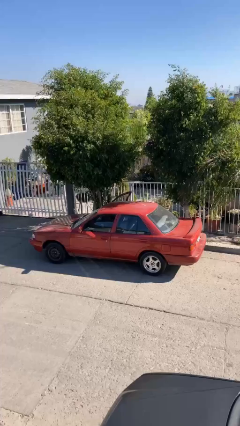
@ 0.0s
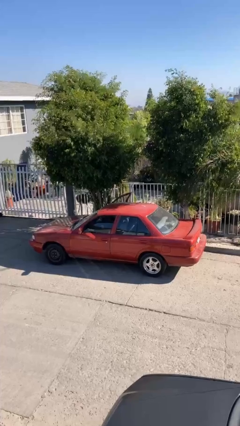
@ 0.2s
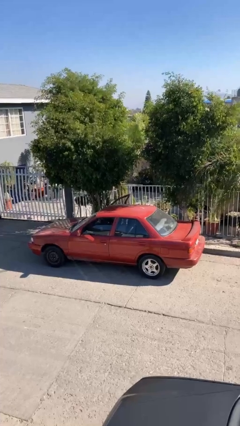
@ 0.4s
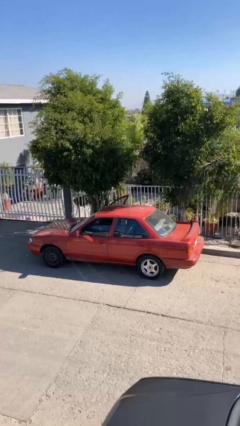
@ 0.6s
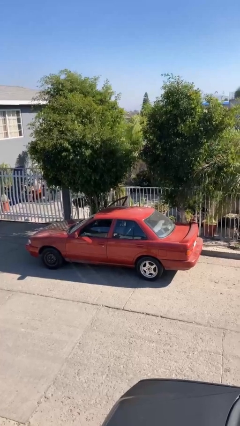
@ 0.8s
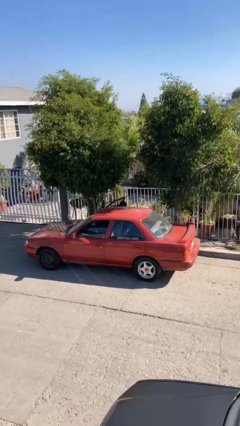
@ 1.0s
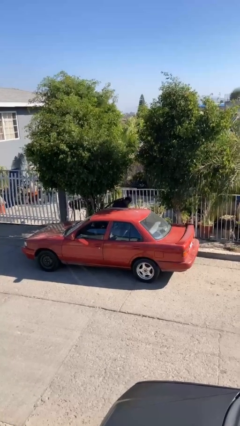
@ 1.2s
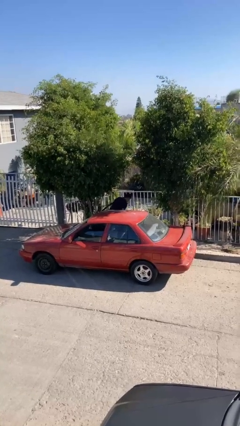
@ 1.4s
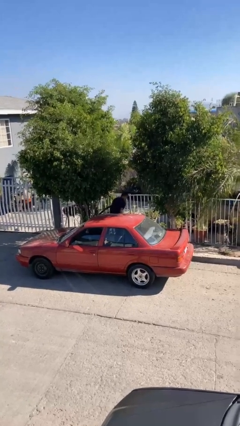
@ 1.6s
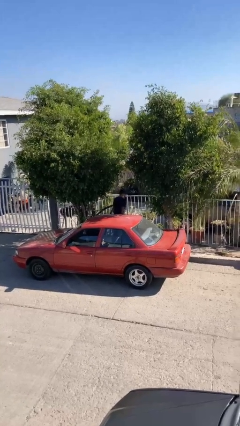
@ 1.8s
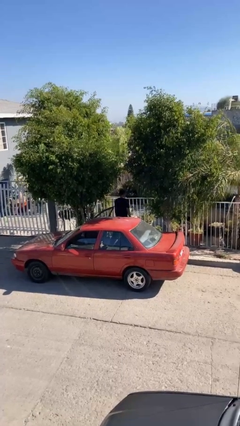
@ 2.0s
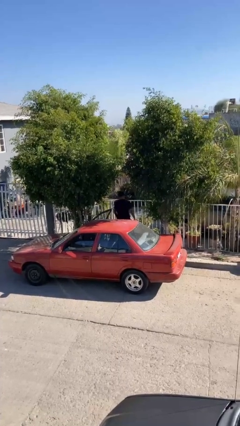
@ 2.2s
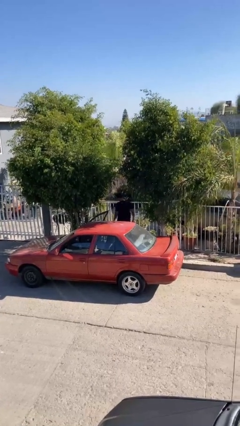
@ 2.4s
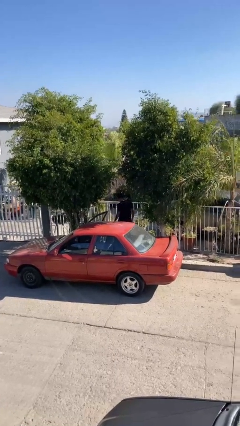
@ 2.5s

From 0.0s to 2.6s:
person exits car

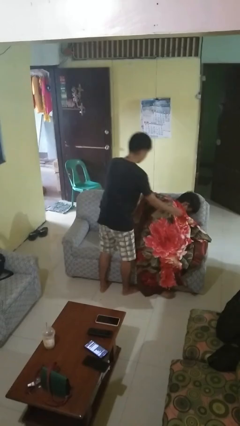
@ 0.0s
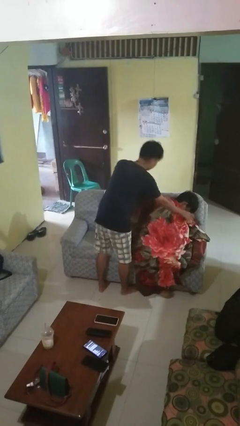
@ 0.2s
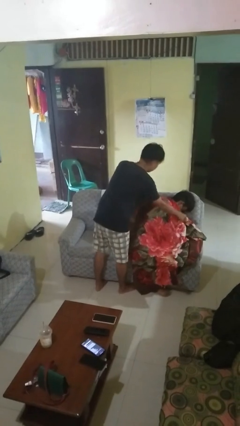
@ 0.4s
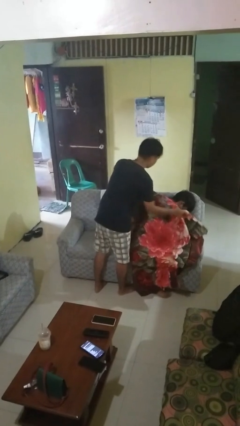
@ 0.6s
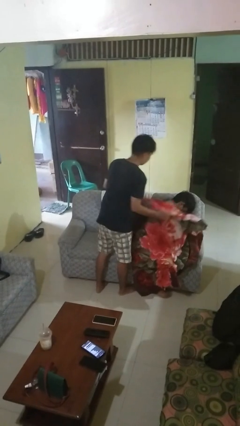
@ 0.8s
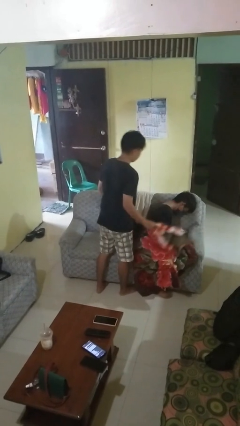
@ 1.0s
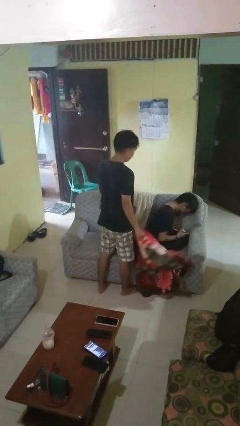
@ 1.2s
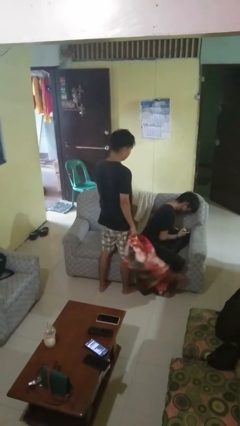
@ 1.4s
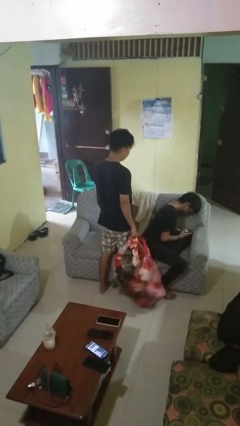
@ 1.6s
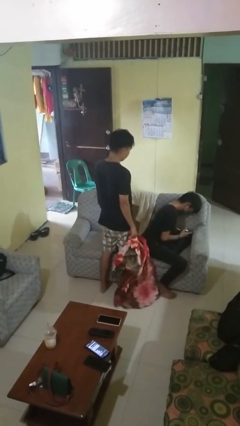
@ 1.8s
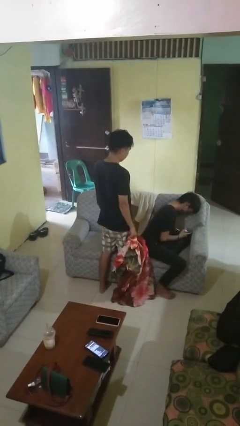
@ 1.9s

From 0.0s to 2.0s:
person uncovers friend with blanket

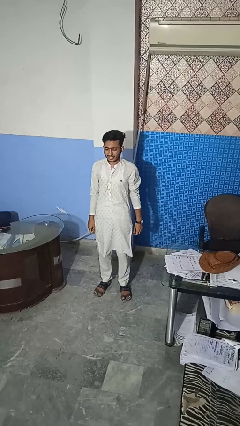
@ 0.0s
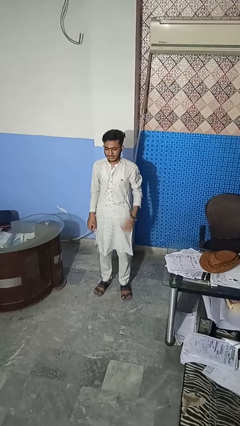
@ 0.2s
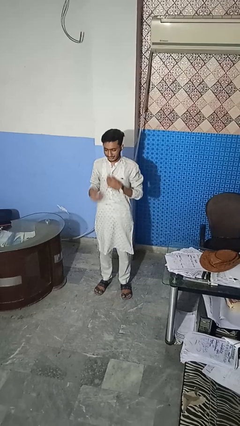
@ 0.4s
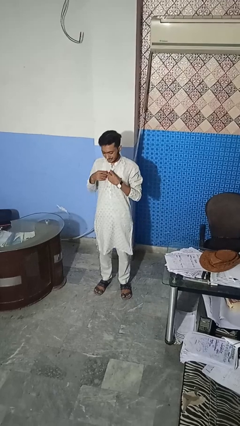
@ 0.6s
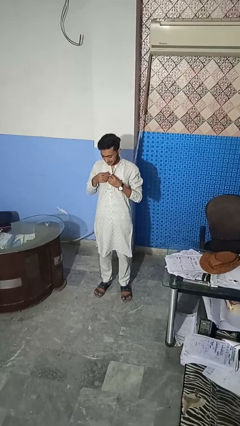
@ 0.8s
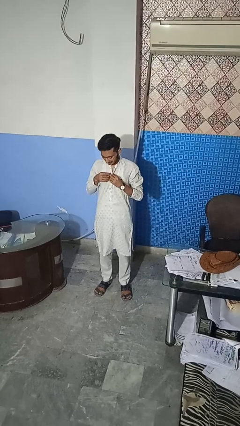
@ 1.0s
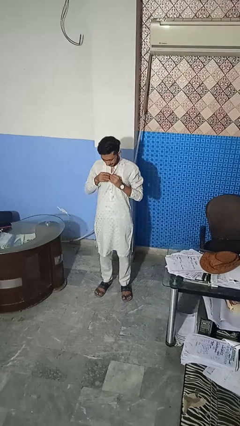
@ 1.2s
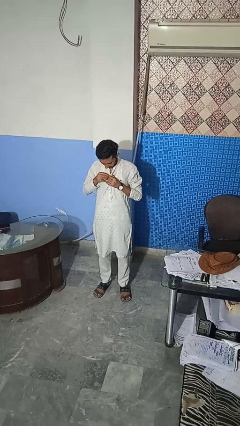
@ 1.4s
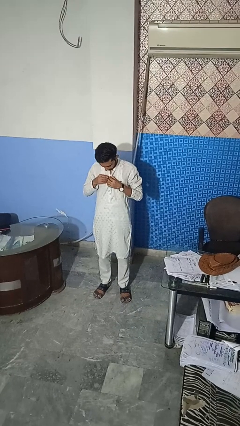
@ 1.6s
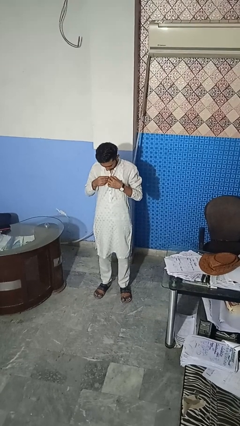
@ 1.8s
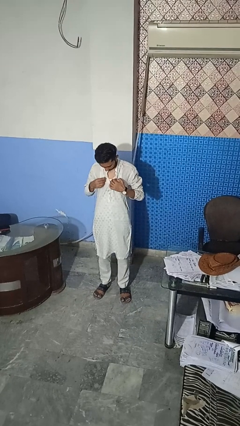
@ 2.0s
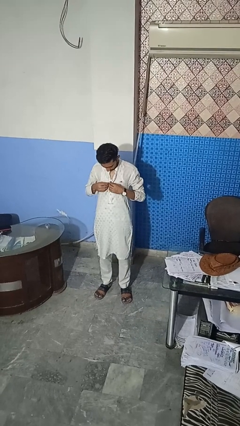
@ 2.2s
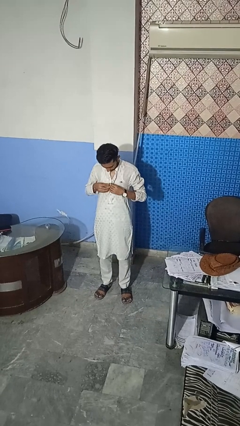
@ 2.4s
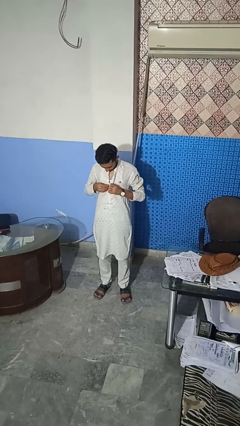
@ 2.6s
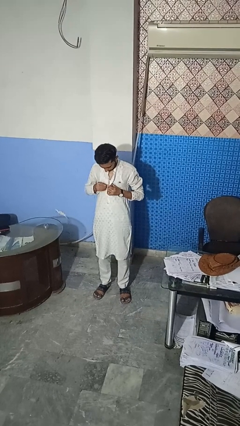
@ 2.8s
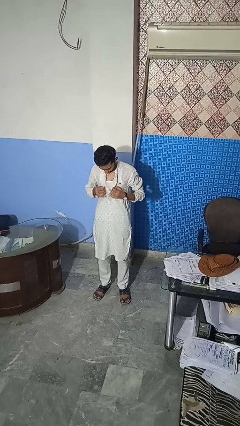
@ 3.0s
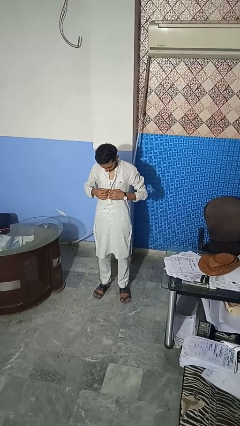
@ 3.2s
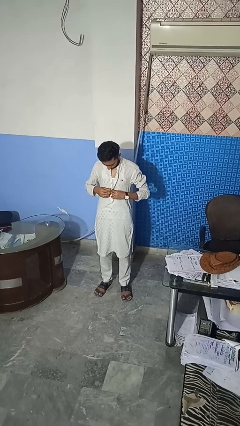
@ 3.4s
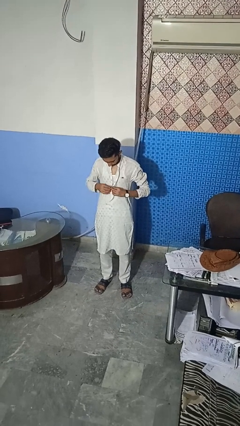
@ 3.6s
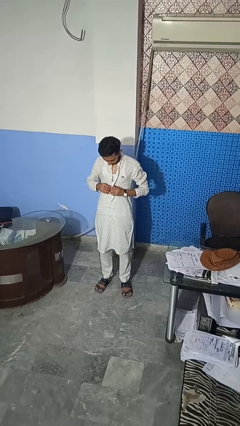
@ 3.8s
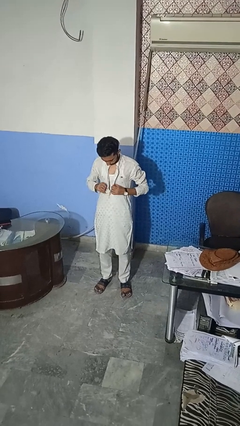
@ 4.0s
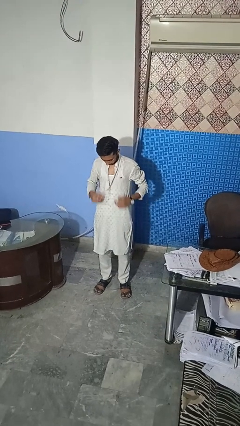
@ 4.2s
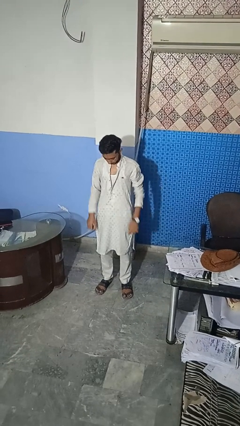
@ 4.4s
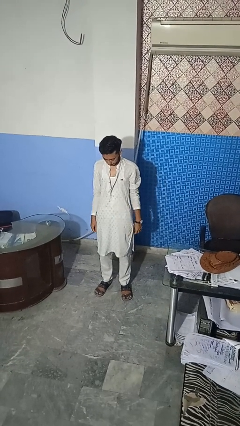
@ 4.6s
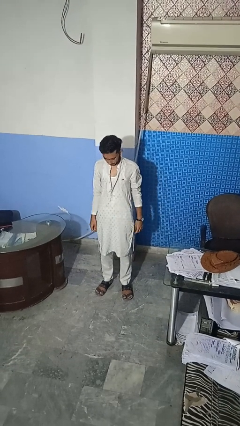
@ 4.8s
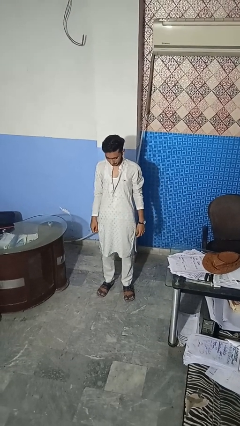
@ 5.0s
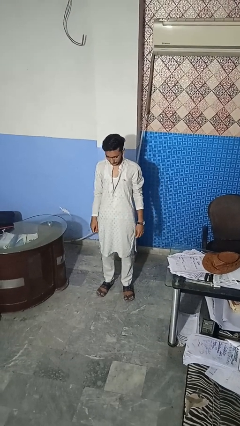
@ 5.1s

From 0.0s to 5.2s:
person unbuttons shirt

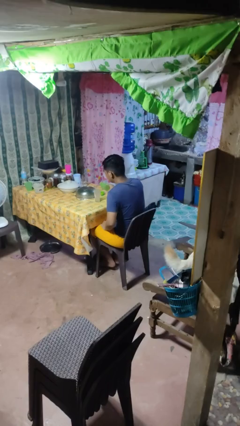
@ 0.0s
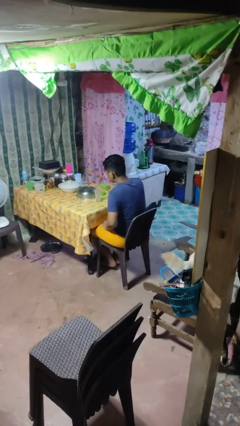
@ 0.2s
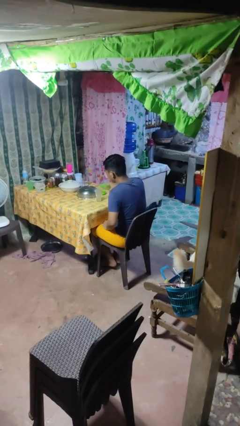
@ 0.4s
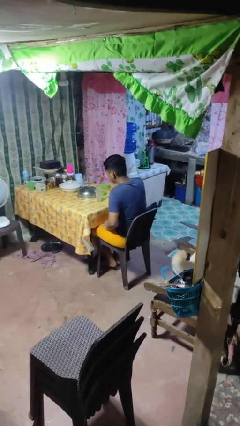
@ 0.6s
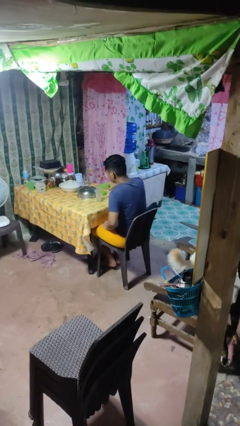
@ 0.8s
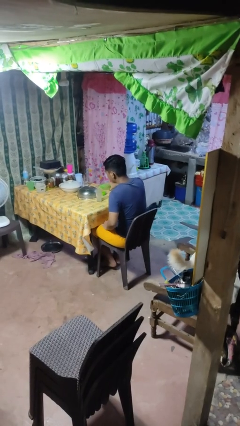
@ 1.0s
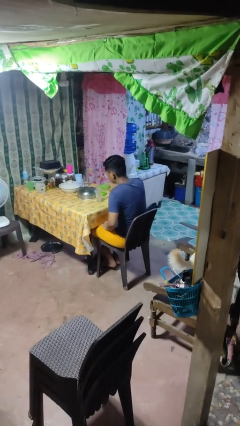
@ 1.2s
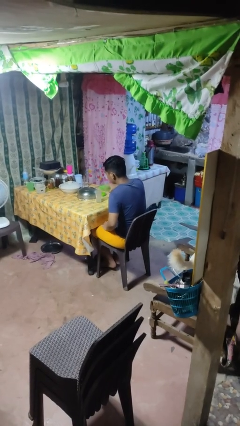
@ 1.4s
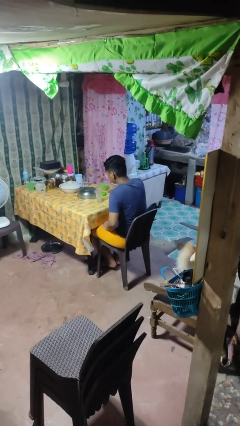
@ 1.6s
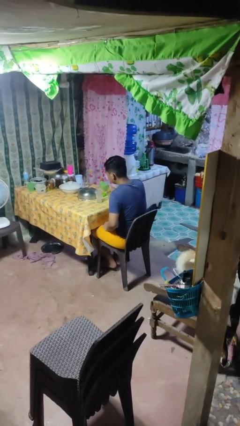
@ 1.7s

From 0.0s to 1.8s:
person pours liquid into cup

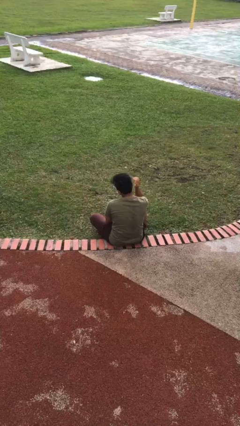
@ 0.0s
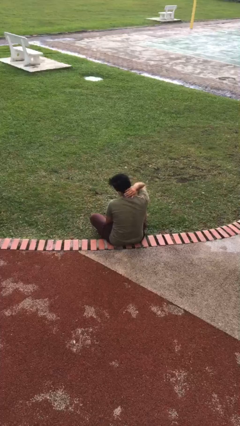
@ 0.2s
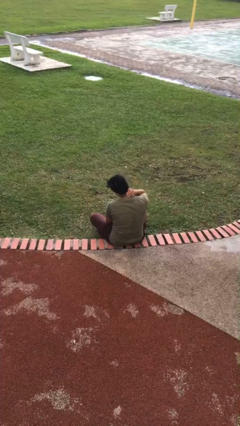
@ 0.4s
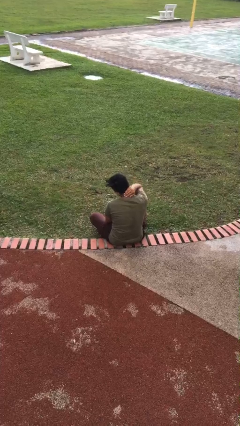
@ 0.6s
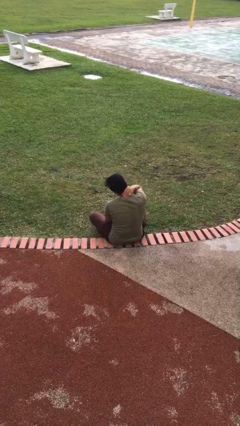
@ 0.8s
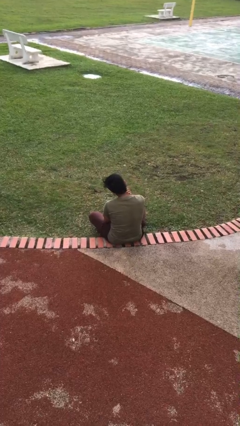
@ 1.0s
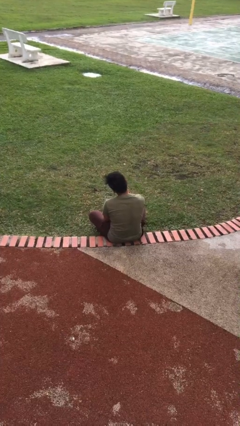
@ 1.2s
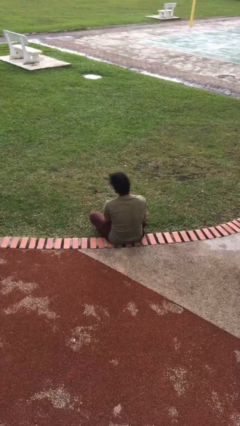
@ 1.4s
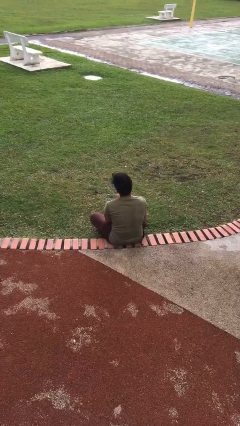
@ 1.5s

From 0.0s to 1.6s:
person rubs neck

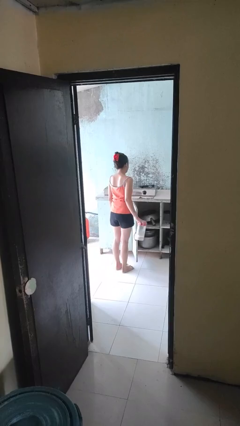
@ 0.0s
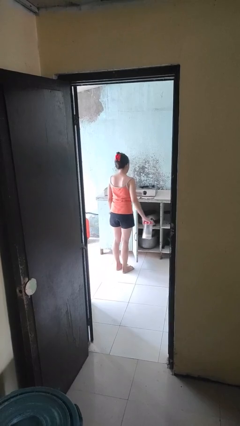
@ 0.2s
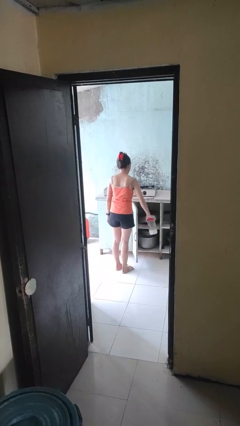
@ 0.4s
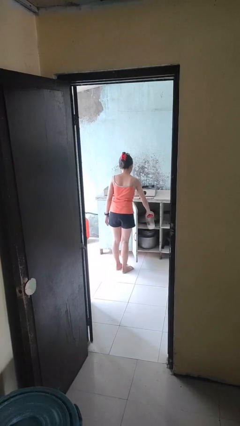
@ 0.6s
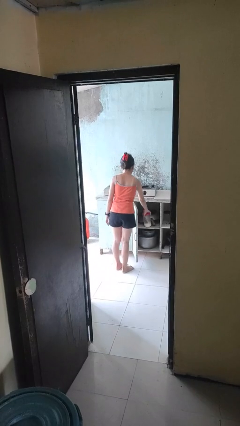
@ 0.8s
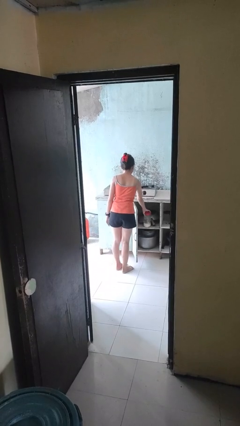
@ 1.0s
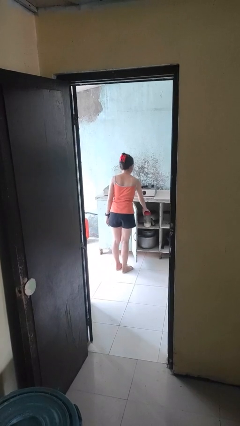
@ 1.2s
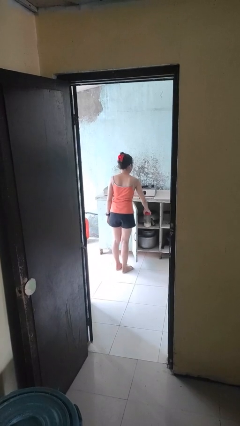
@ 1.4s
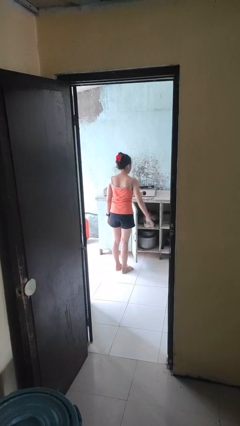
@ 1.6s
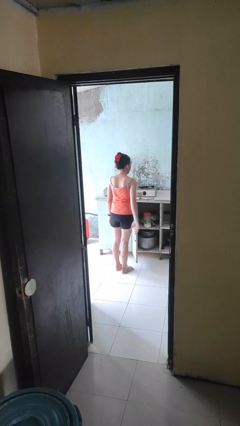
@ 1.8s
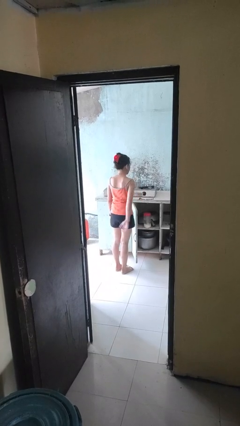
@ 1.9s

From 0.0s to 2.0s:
person puts down object into cabinet

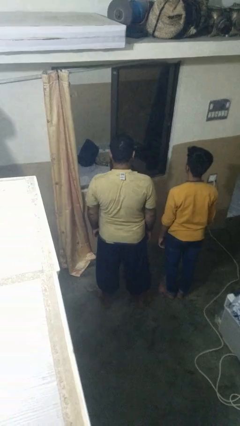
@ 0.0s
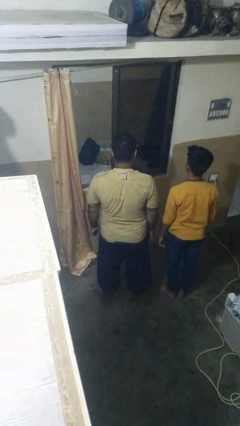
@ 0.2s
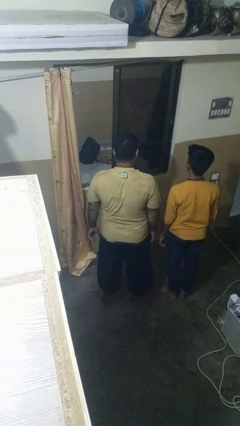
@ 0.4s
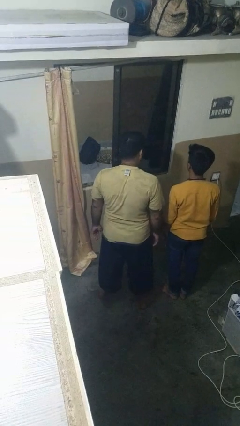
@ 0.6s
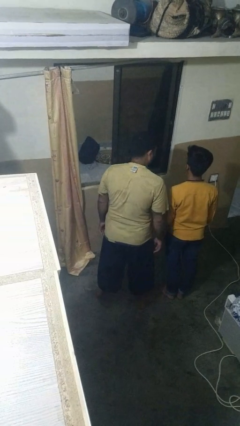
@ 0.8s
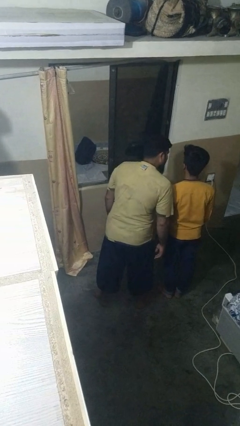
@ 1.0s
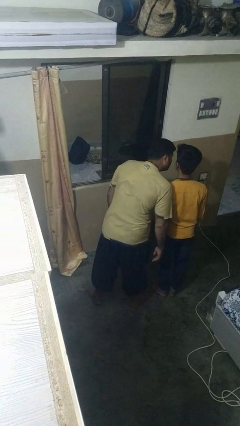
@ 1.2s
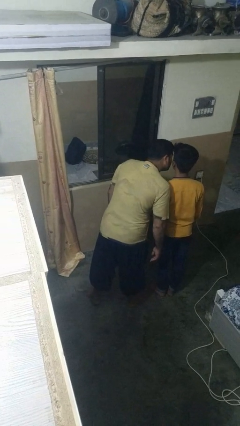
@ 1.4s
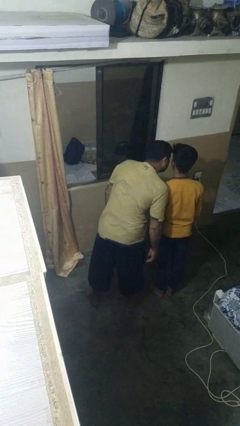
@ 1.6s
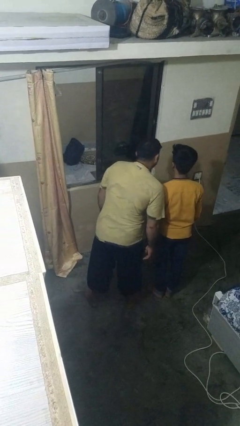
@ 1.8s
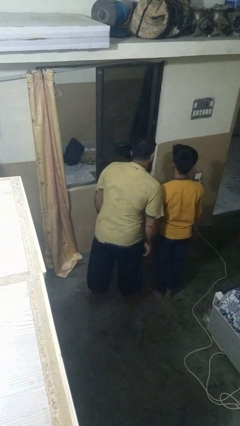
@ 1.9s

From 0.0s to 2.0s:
person kisses cheek of person
